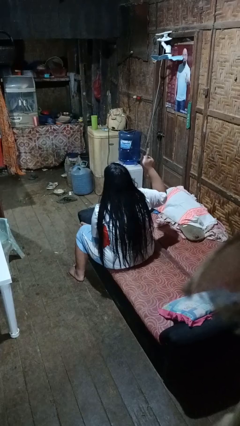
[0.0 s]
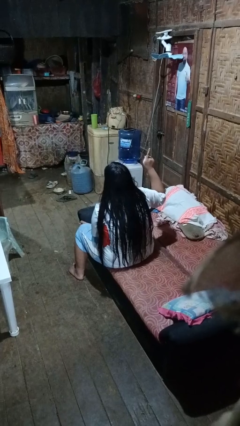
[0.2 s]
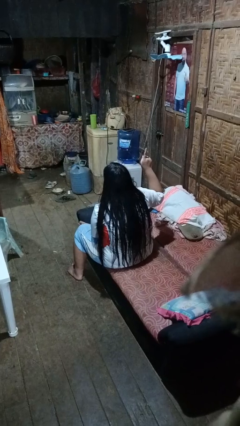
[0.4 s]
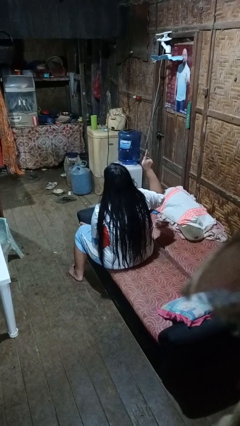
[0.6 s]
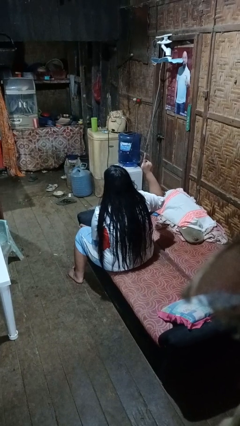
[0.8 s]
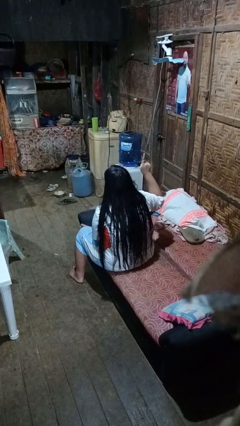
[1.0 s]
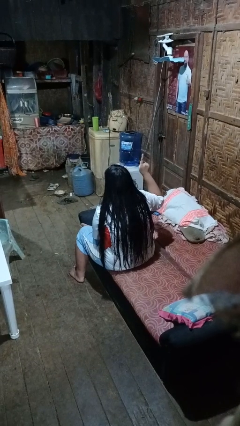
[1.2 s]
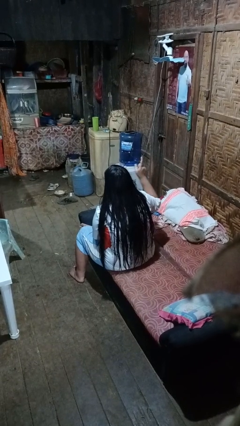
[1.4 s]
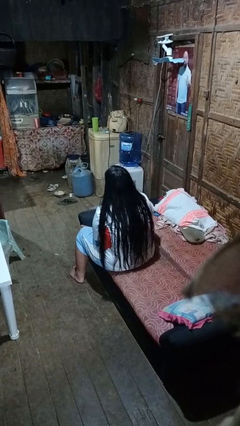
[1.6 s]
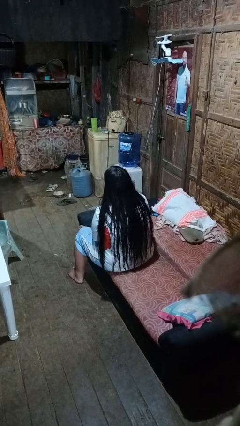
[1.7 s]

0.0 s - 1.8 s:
person gestures number one

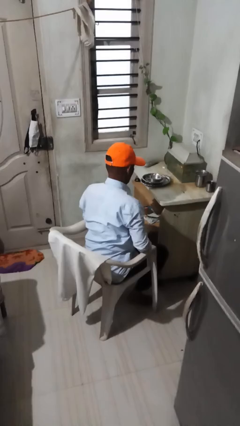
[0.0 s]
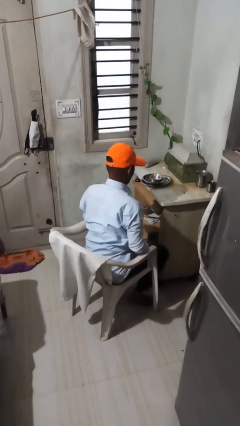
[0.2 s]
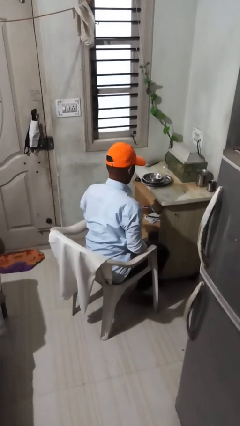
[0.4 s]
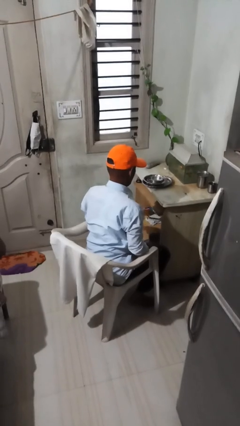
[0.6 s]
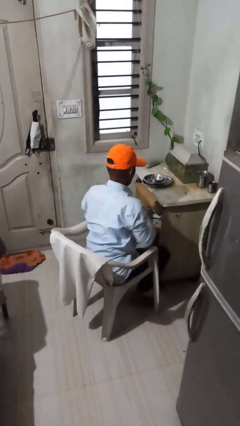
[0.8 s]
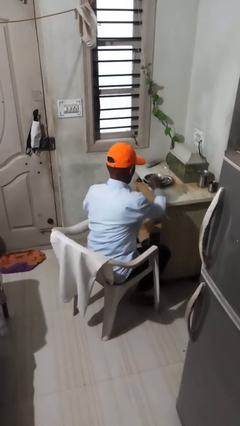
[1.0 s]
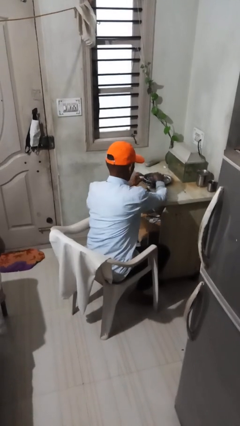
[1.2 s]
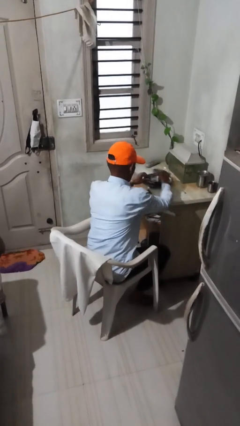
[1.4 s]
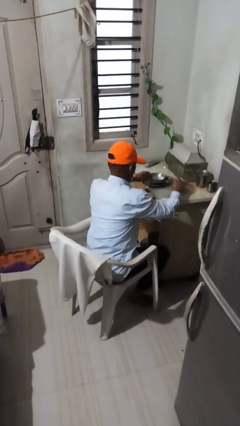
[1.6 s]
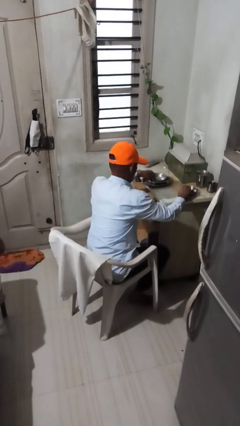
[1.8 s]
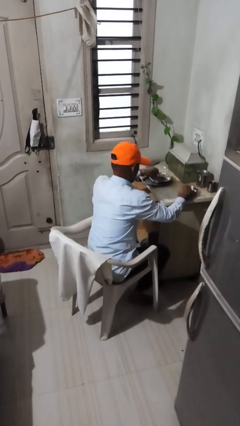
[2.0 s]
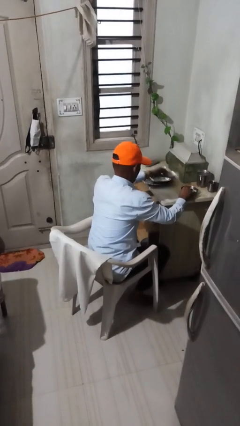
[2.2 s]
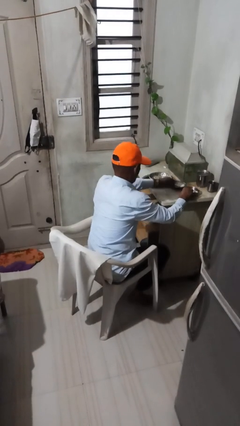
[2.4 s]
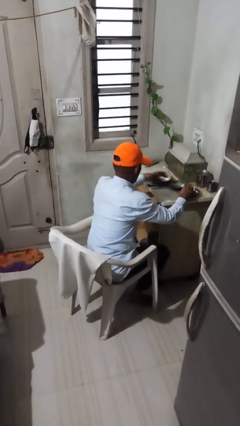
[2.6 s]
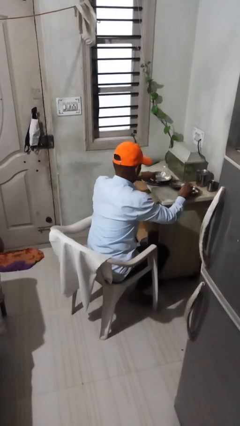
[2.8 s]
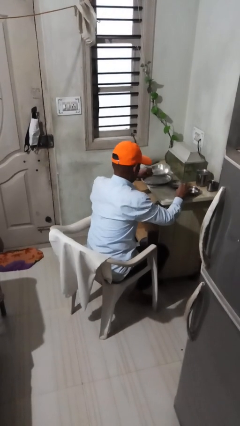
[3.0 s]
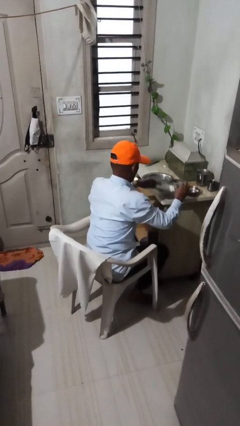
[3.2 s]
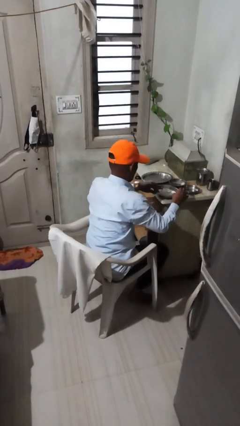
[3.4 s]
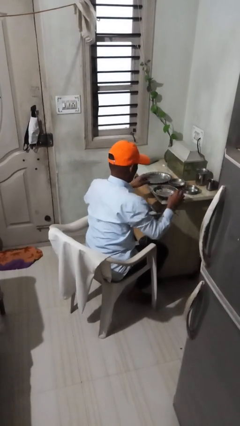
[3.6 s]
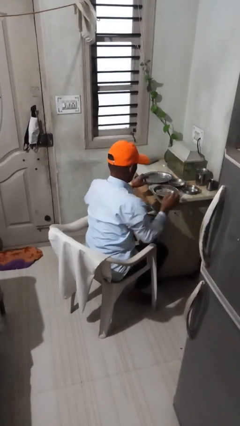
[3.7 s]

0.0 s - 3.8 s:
person sets table

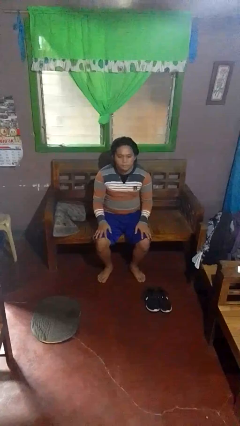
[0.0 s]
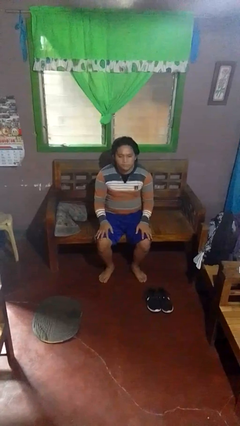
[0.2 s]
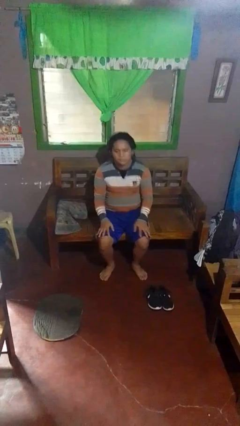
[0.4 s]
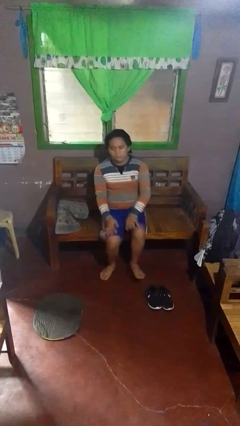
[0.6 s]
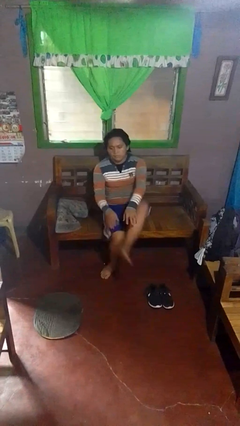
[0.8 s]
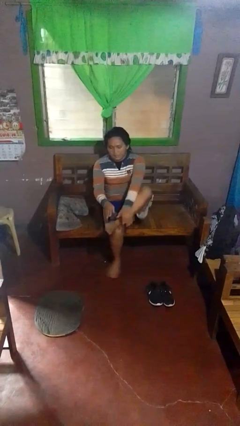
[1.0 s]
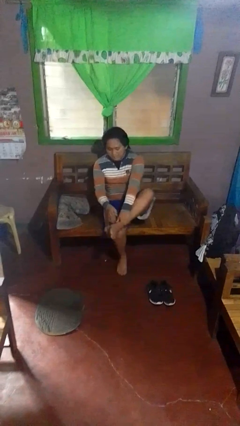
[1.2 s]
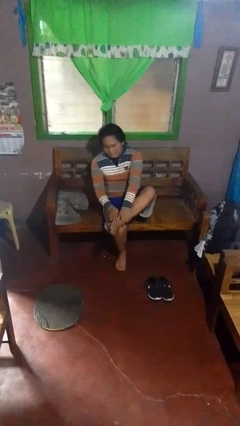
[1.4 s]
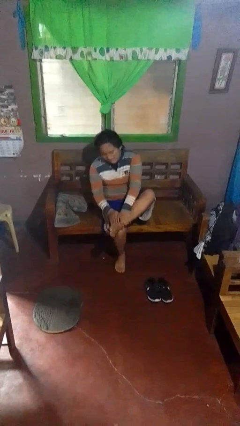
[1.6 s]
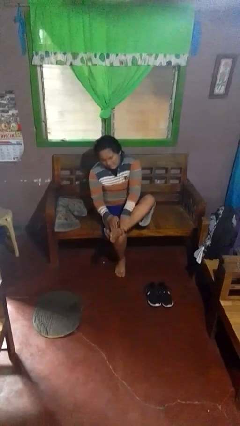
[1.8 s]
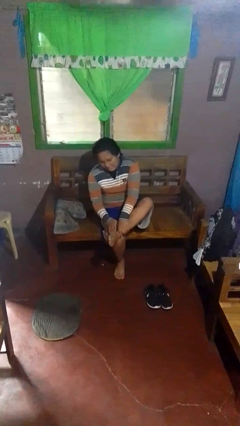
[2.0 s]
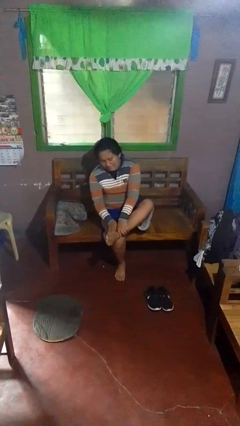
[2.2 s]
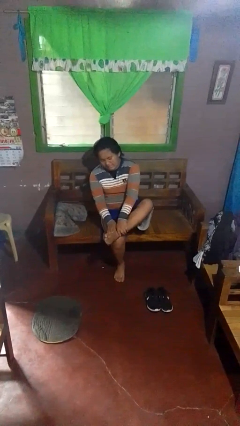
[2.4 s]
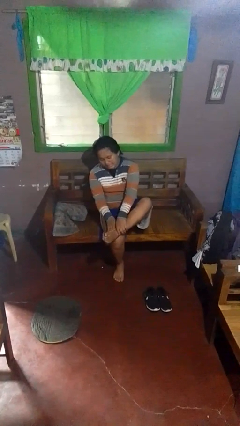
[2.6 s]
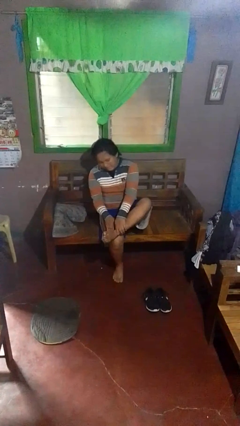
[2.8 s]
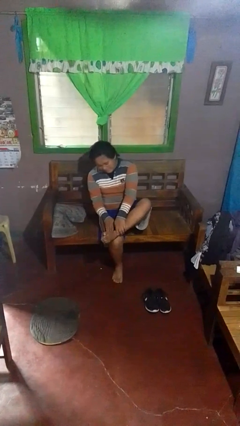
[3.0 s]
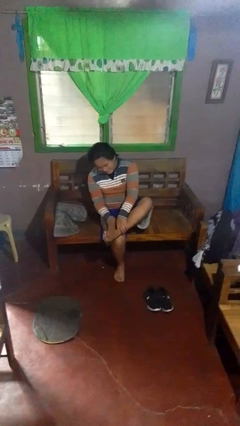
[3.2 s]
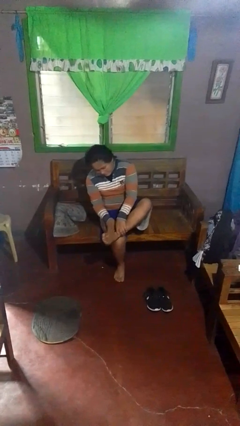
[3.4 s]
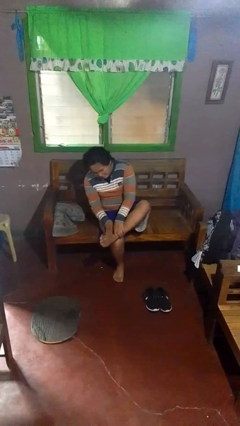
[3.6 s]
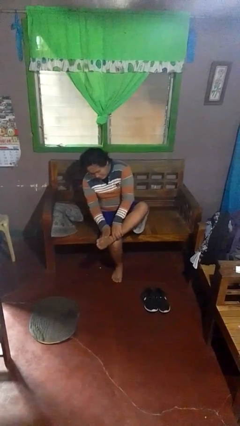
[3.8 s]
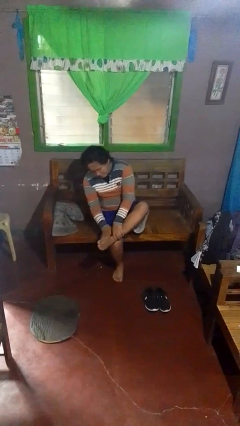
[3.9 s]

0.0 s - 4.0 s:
person rubs foot

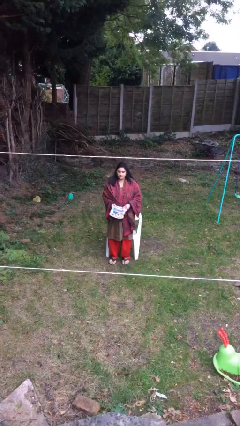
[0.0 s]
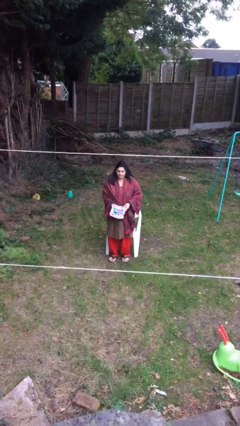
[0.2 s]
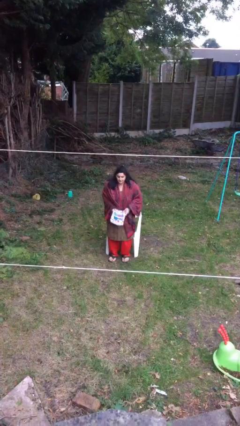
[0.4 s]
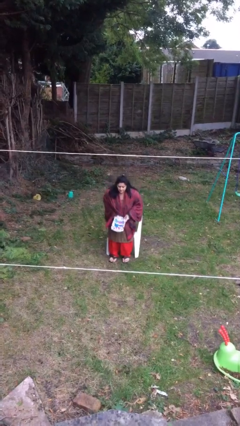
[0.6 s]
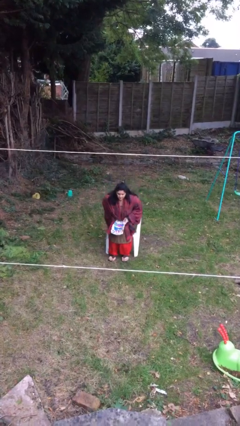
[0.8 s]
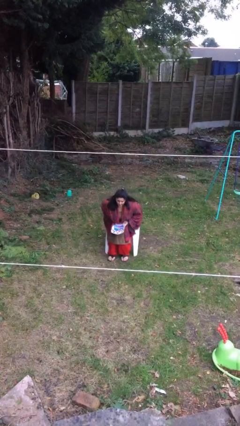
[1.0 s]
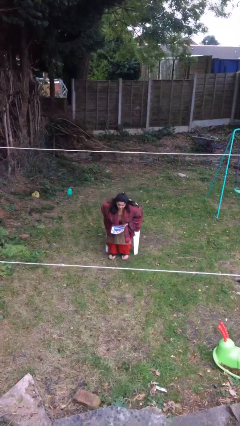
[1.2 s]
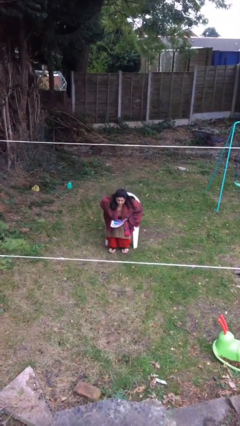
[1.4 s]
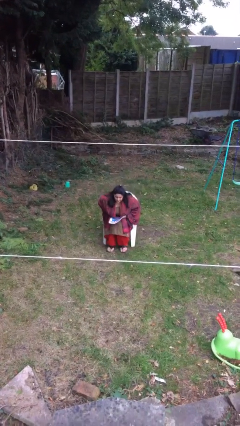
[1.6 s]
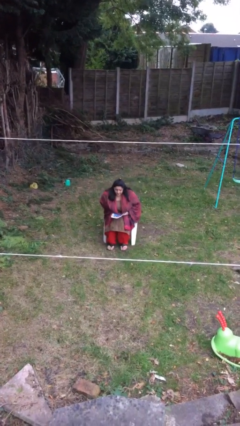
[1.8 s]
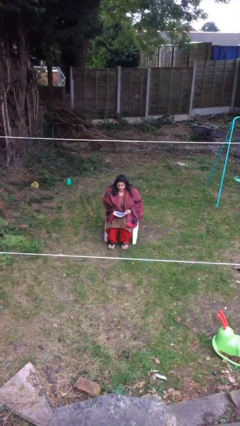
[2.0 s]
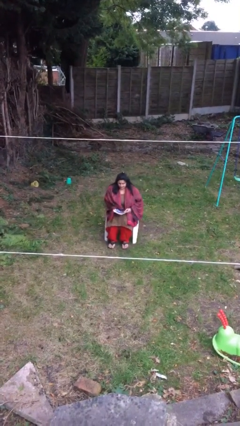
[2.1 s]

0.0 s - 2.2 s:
person sits down

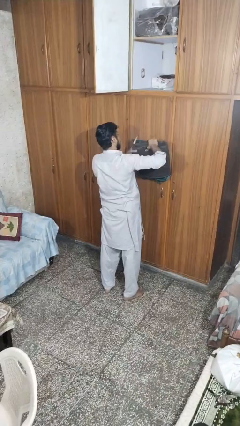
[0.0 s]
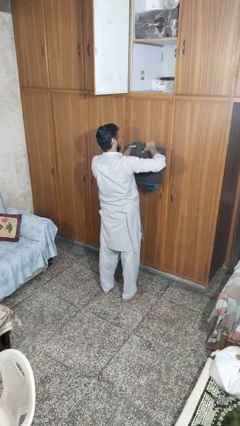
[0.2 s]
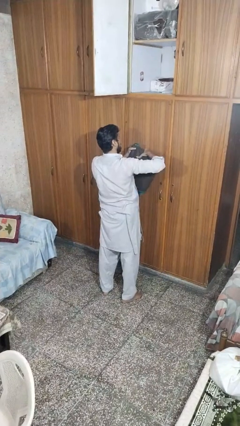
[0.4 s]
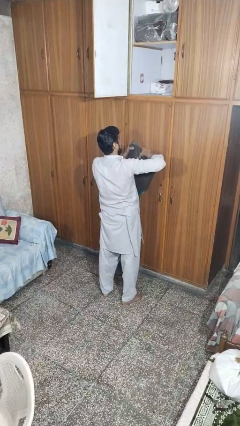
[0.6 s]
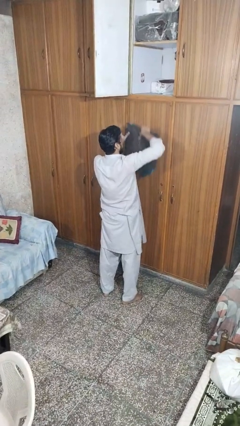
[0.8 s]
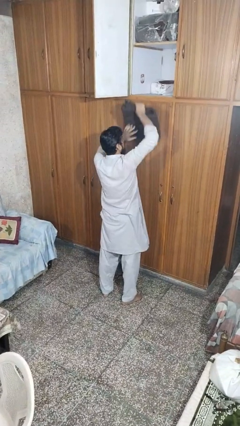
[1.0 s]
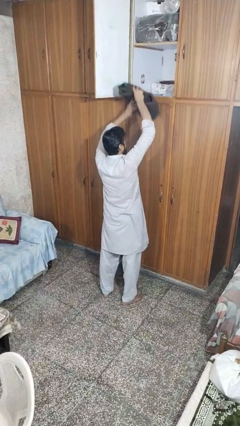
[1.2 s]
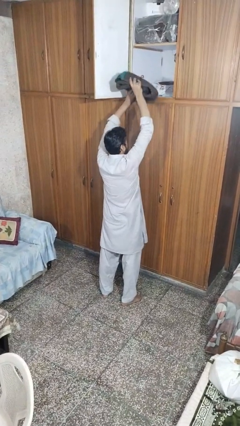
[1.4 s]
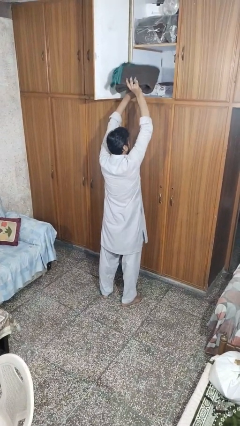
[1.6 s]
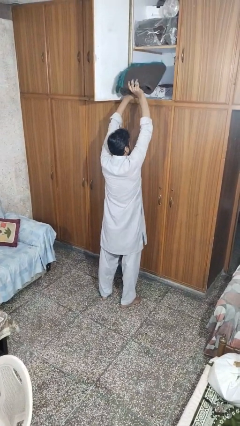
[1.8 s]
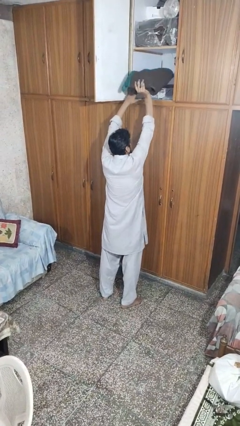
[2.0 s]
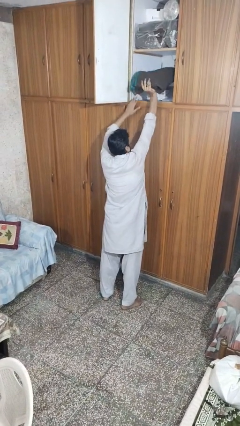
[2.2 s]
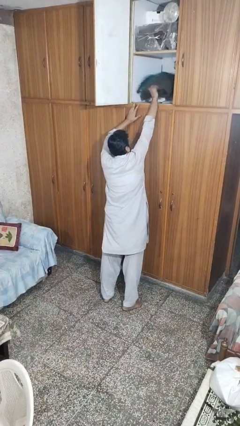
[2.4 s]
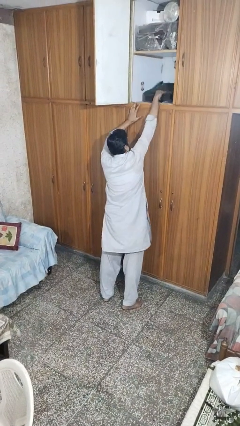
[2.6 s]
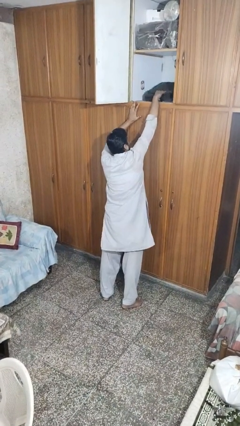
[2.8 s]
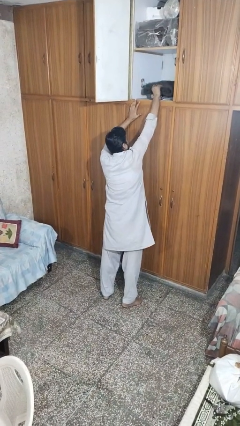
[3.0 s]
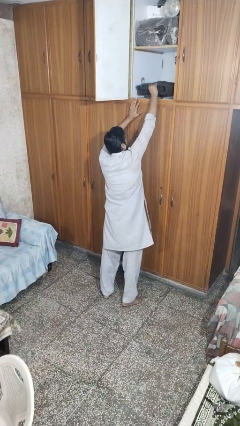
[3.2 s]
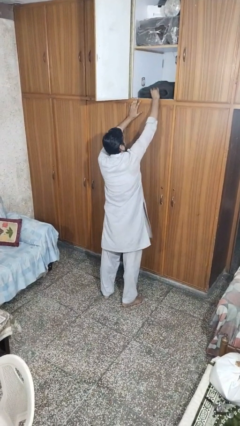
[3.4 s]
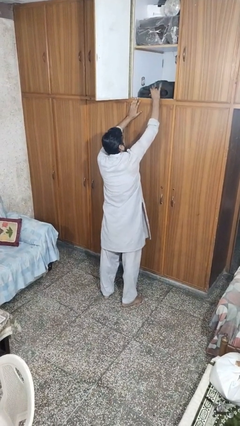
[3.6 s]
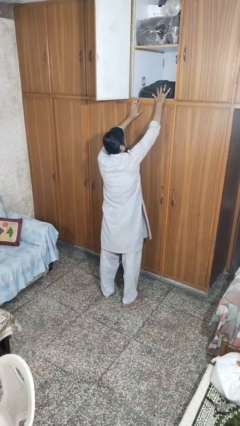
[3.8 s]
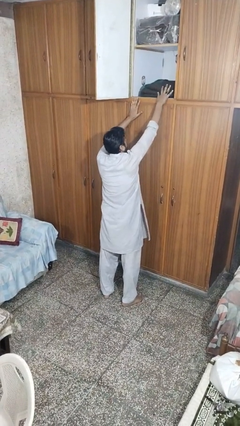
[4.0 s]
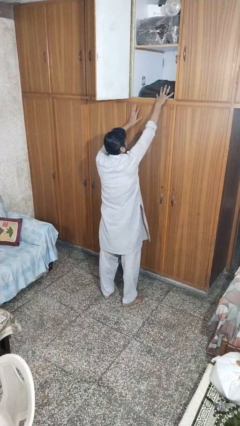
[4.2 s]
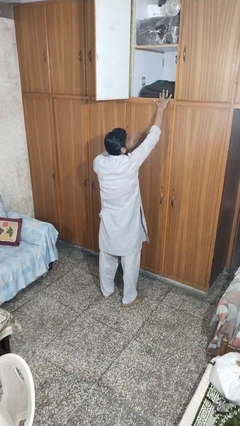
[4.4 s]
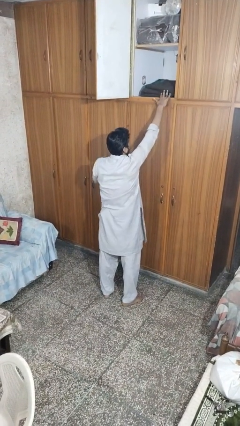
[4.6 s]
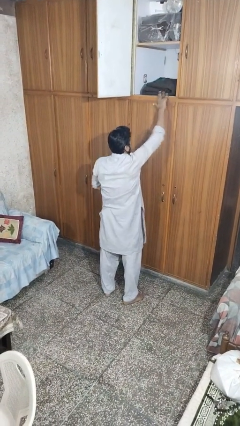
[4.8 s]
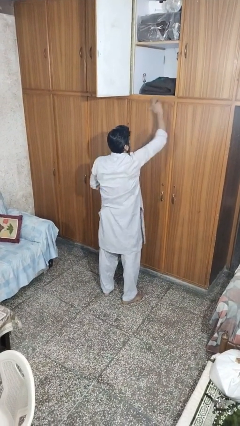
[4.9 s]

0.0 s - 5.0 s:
person puts down object on shelf

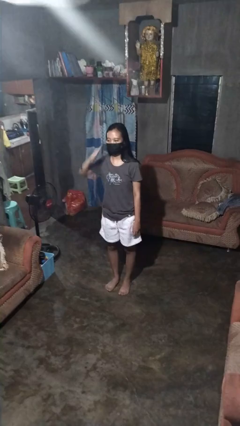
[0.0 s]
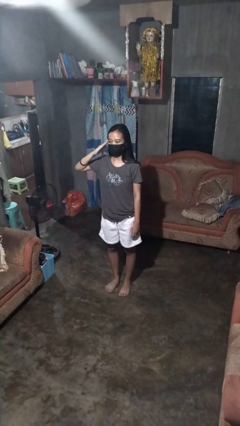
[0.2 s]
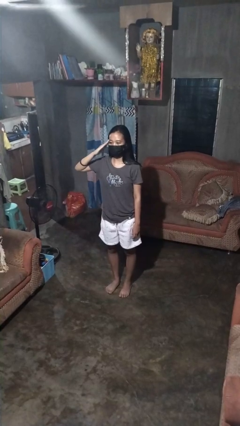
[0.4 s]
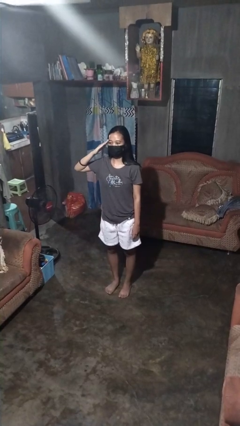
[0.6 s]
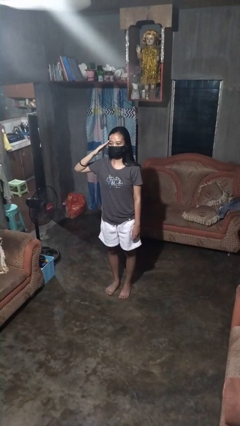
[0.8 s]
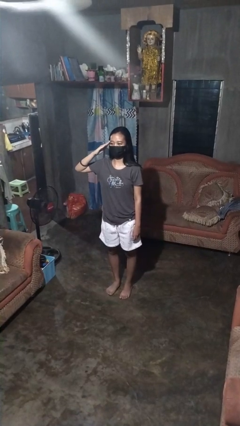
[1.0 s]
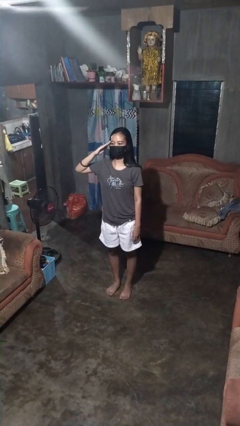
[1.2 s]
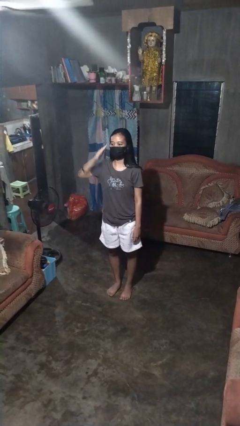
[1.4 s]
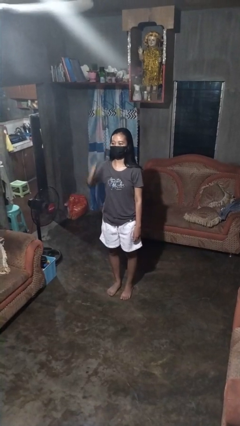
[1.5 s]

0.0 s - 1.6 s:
person salutes
